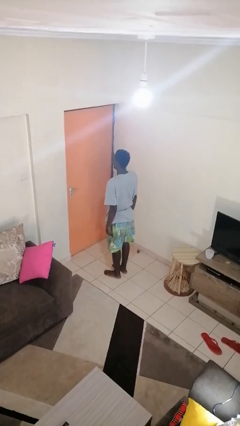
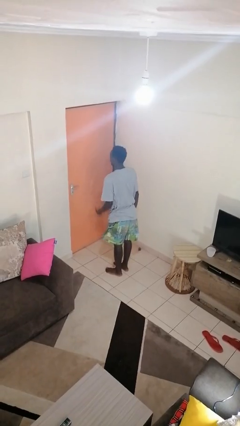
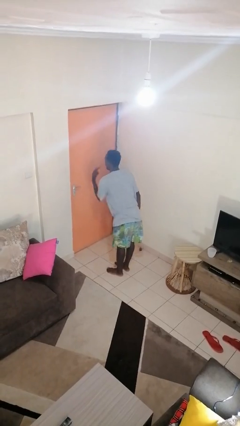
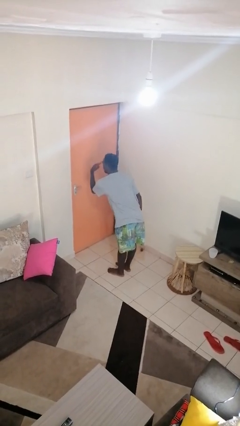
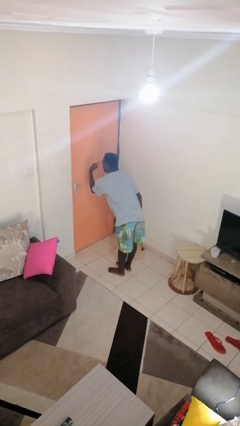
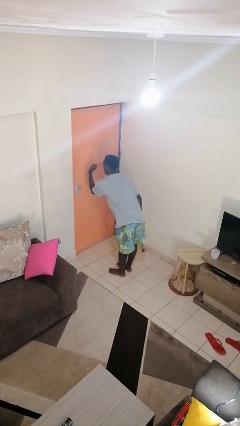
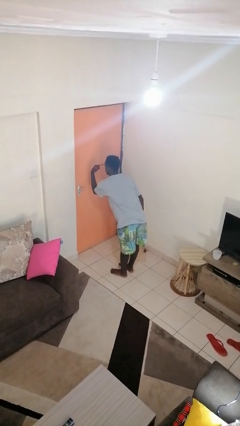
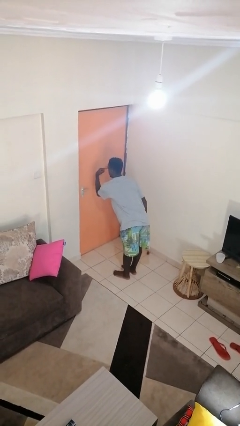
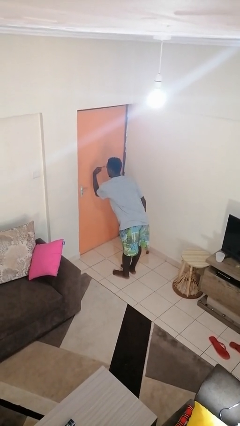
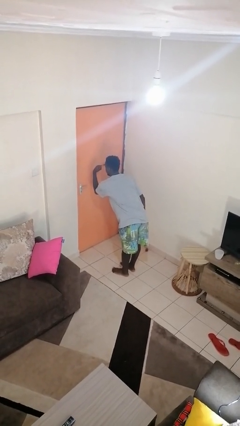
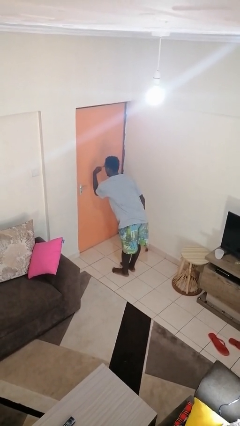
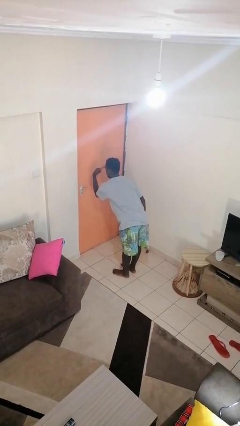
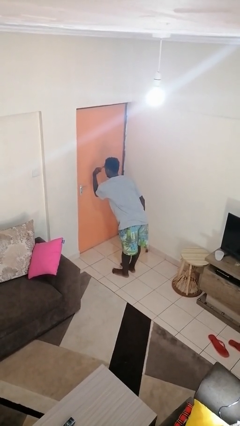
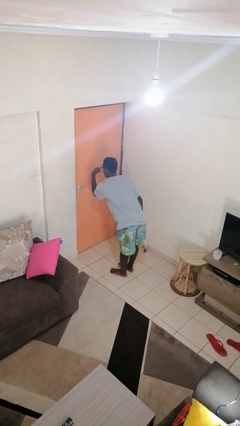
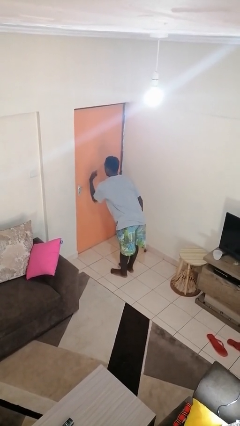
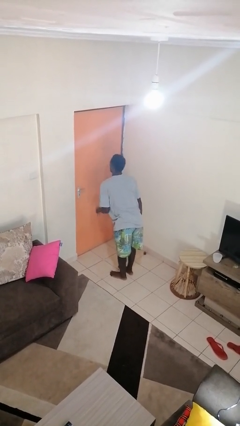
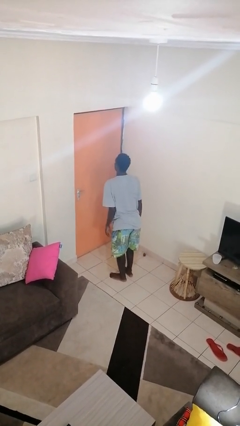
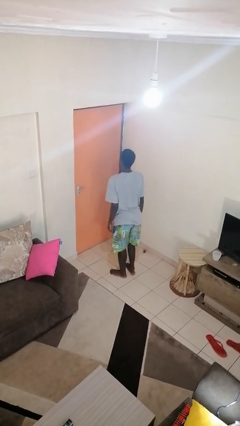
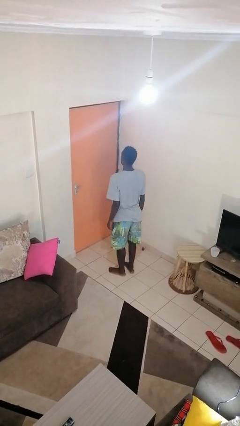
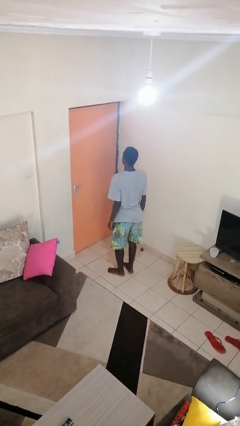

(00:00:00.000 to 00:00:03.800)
person gestures watch closely

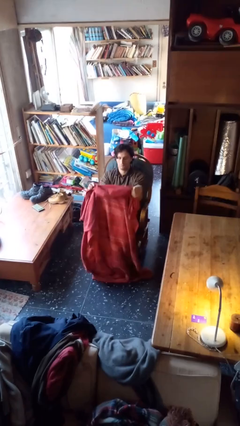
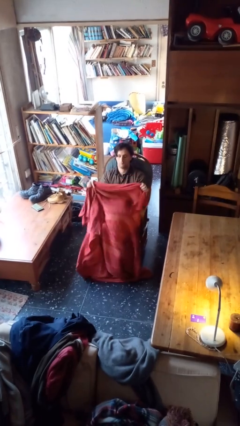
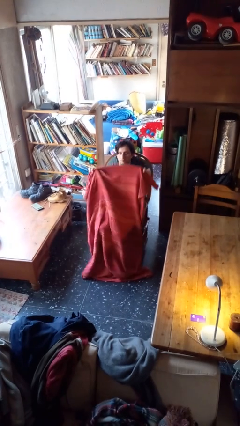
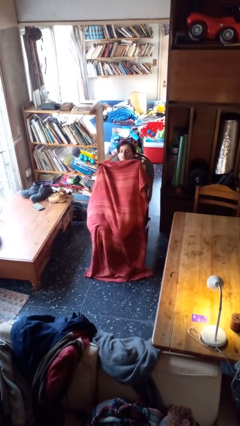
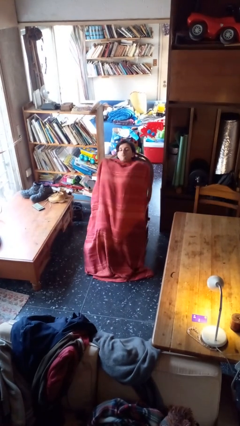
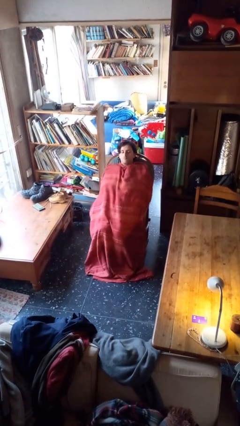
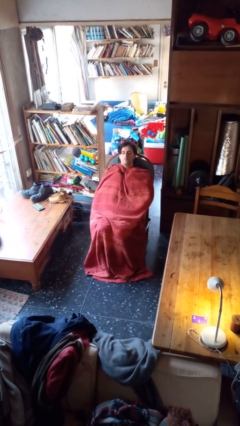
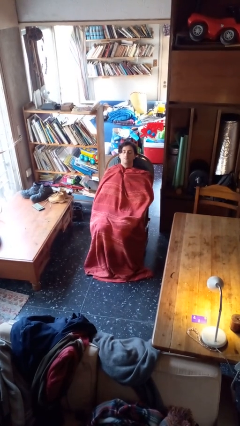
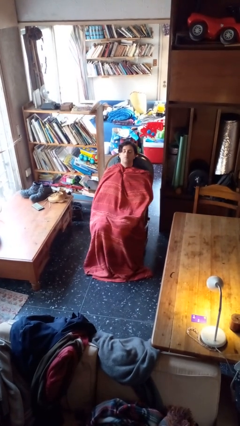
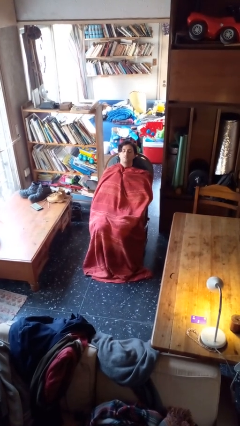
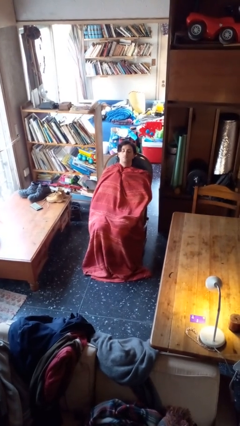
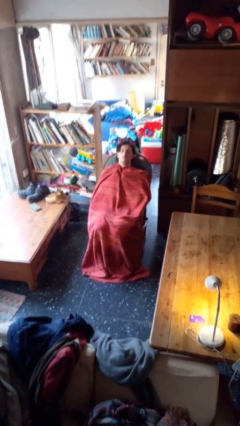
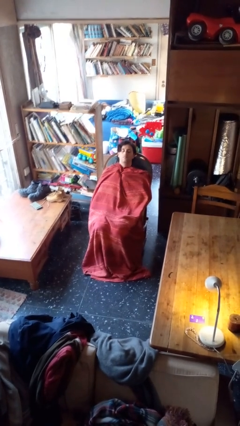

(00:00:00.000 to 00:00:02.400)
person covers with blanket

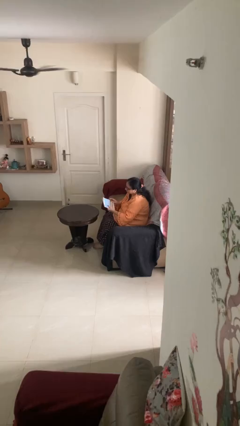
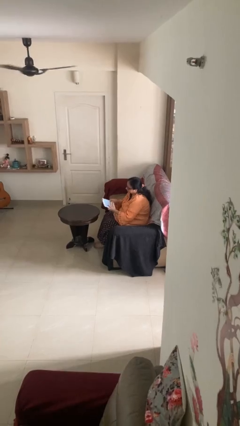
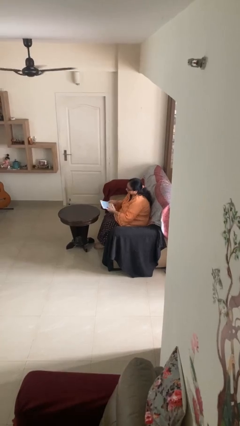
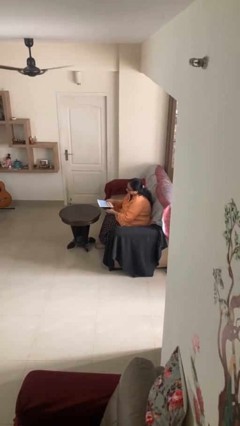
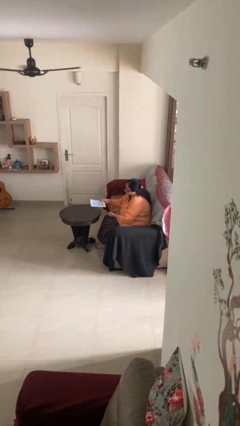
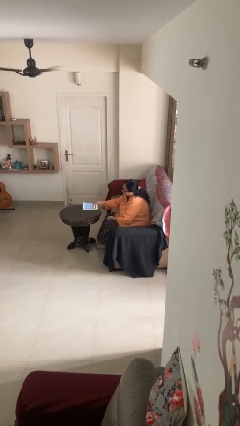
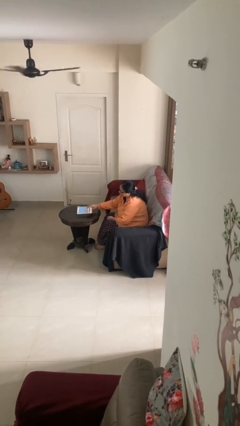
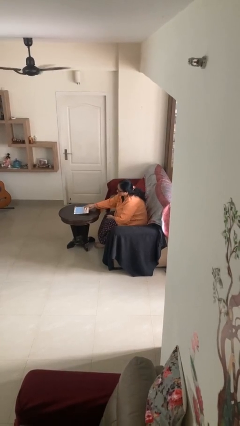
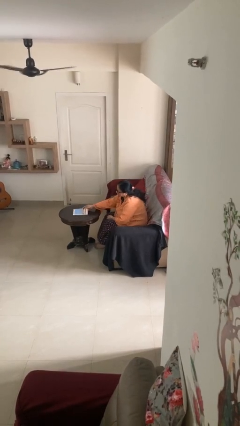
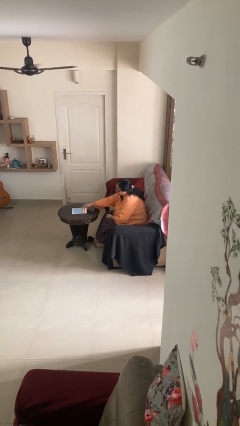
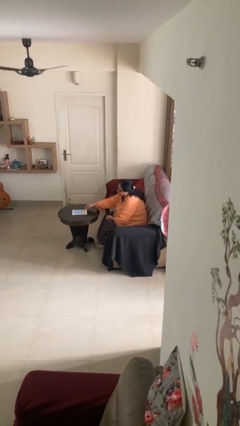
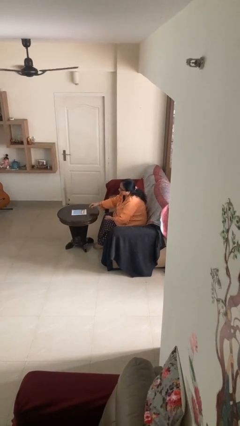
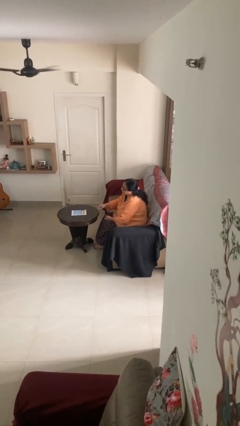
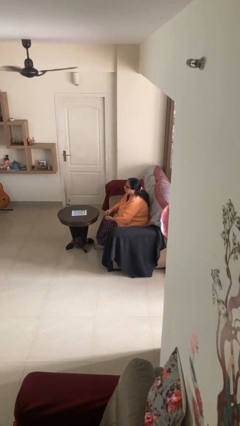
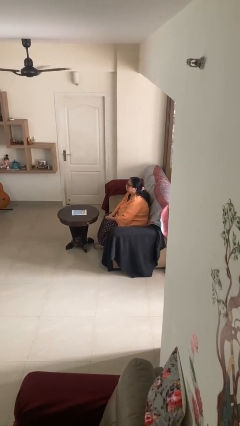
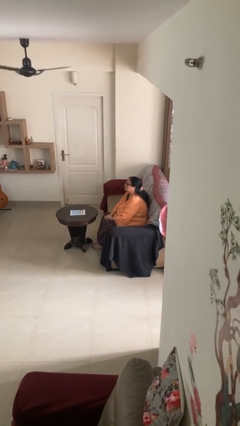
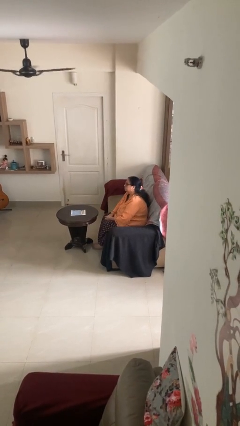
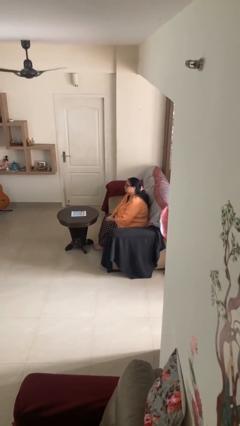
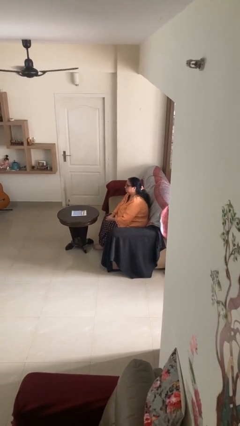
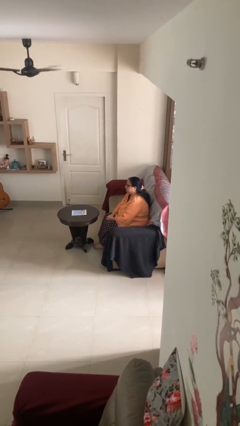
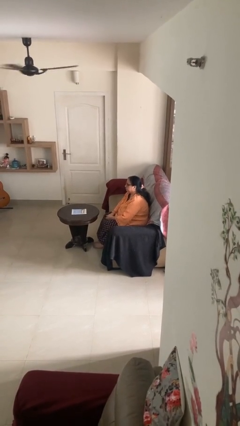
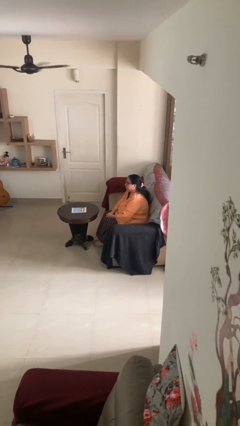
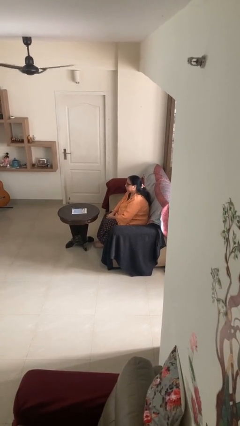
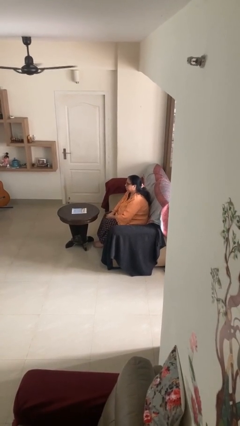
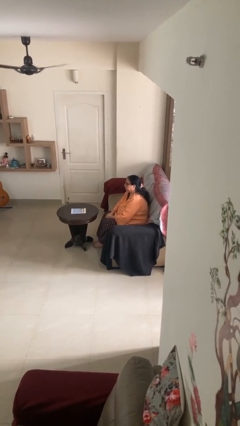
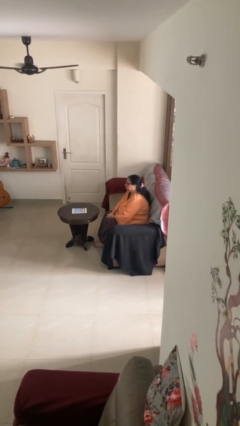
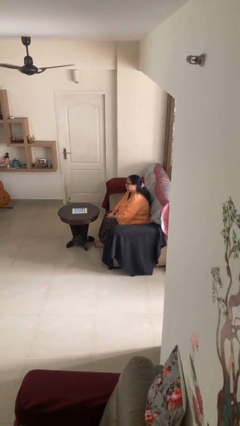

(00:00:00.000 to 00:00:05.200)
person puts down object on table

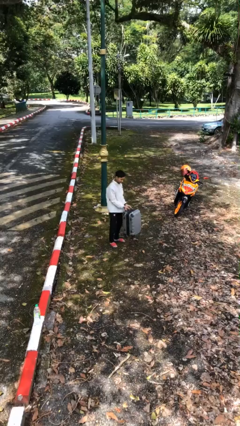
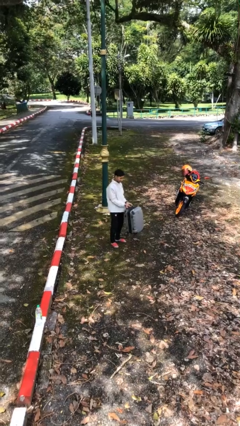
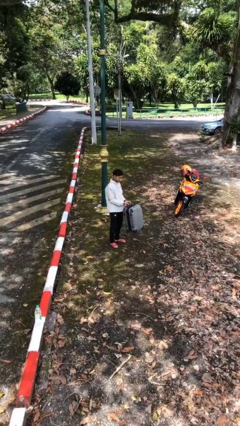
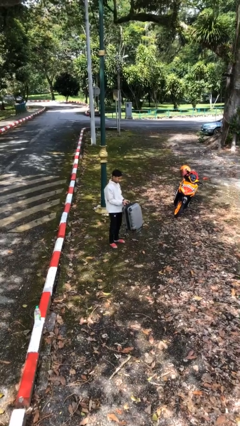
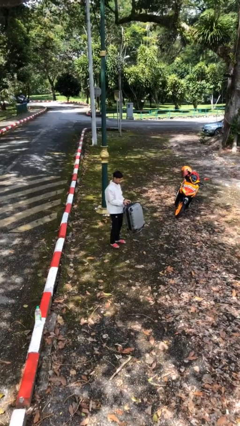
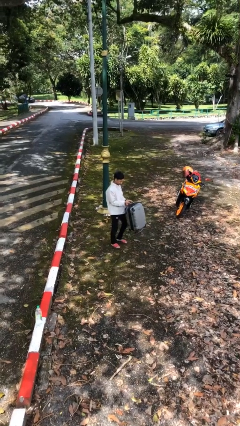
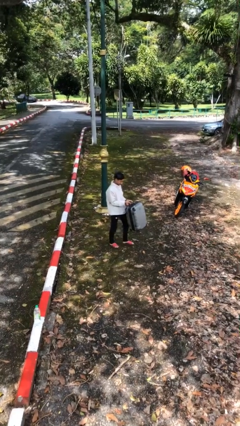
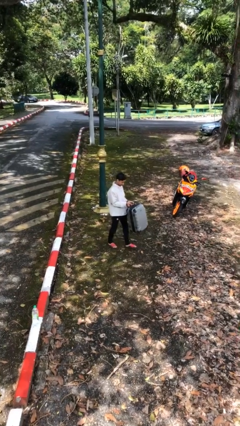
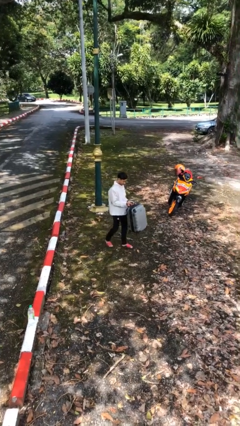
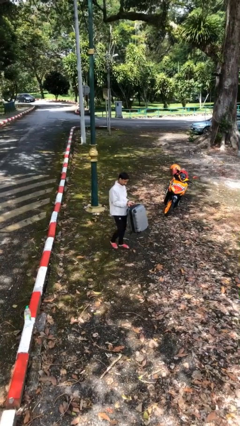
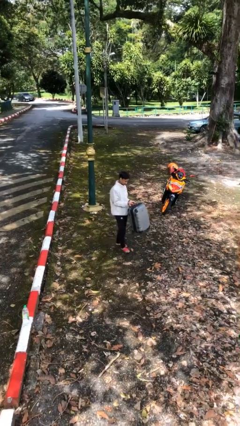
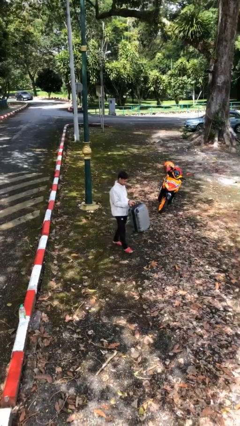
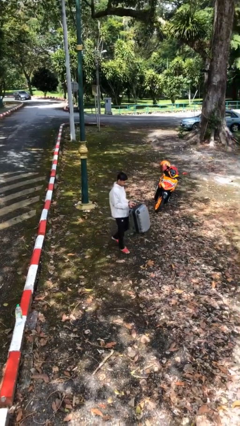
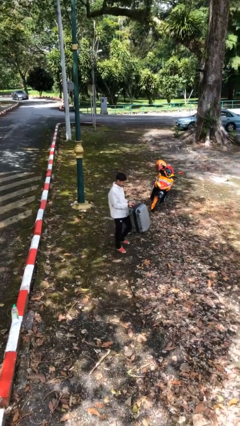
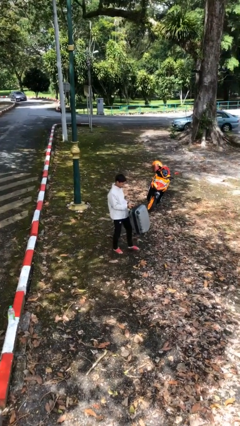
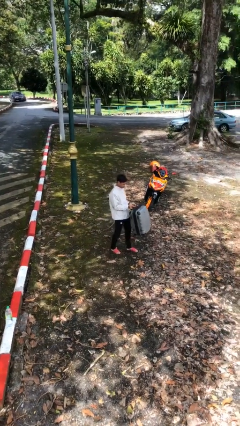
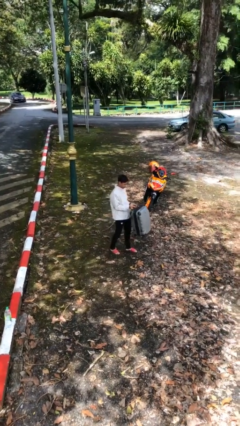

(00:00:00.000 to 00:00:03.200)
person carries heavy object

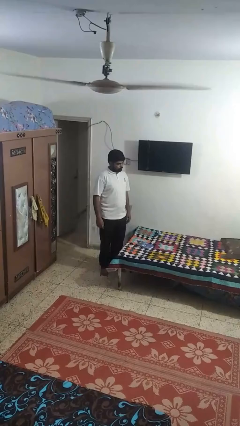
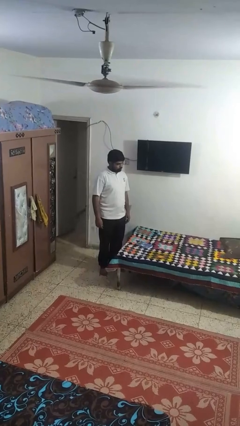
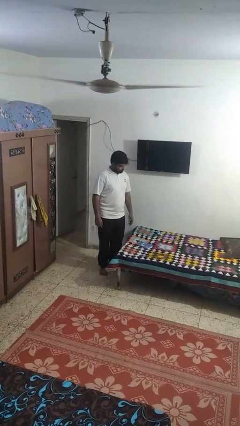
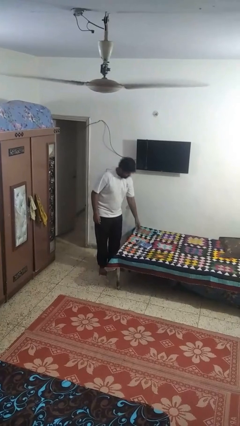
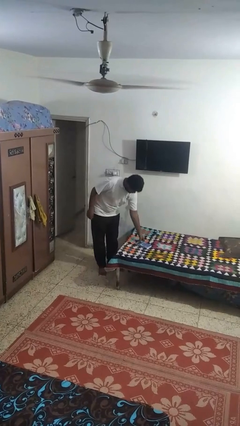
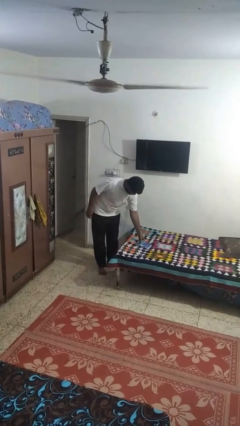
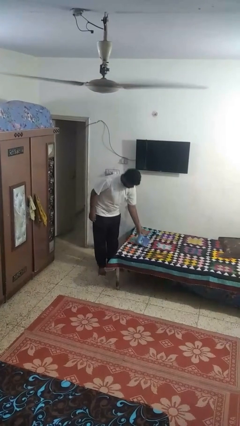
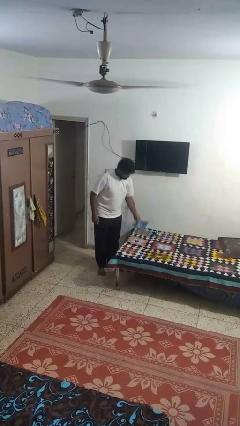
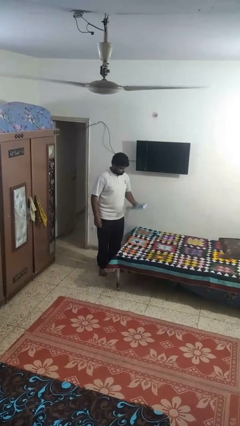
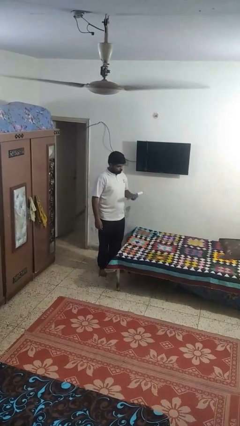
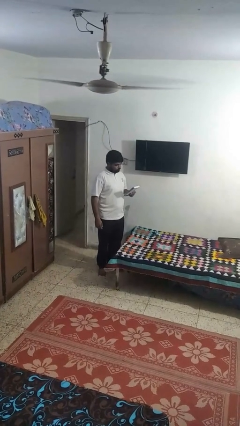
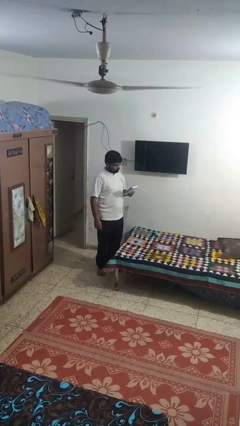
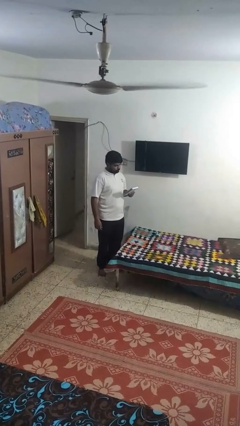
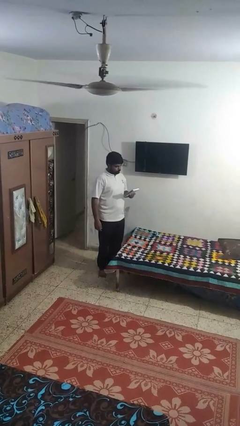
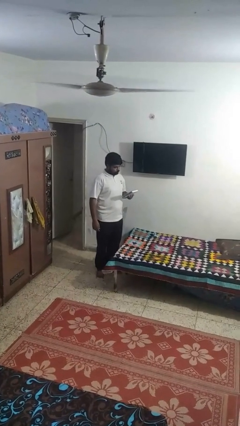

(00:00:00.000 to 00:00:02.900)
person picks up object from bed
